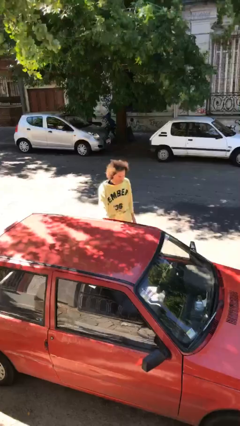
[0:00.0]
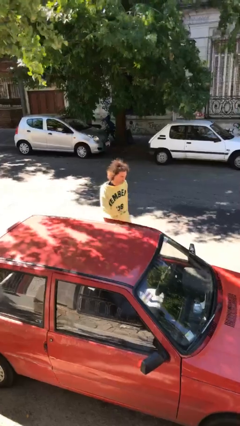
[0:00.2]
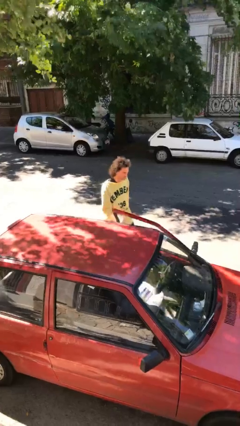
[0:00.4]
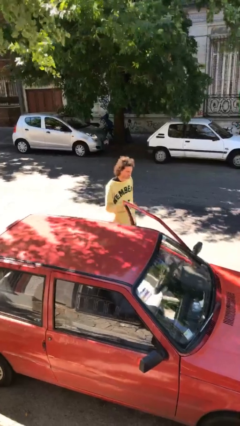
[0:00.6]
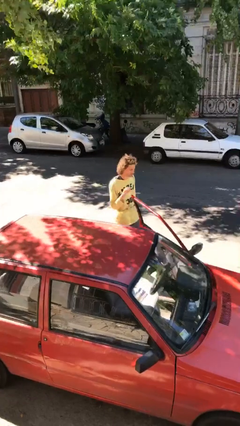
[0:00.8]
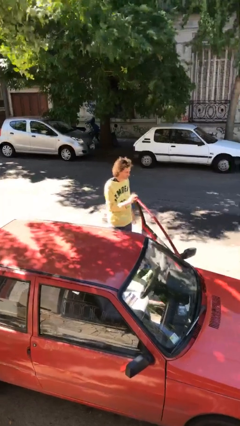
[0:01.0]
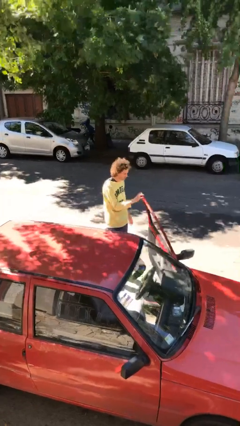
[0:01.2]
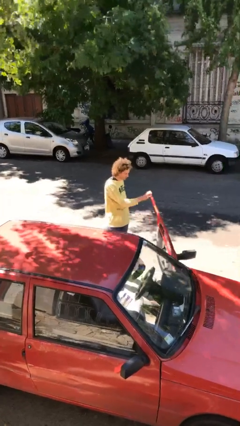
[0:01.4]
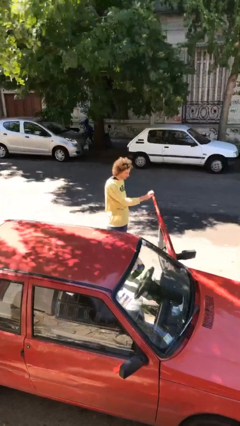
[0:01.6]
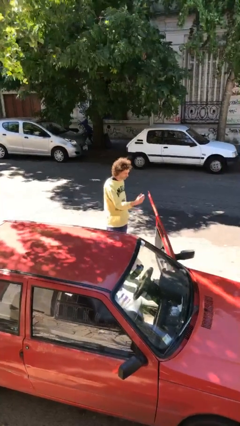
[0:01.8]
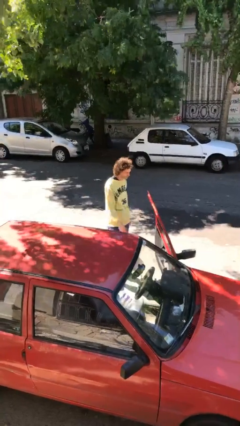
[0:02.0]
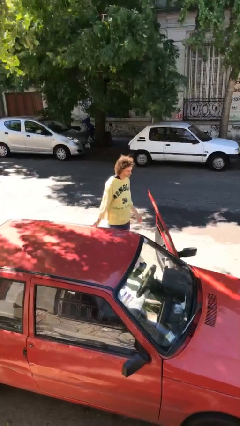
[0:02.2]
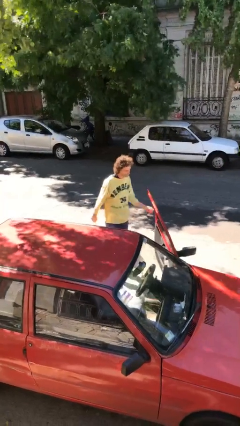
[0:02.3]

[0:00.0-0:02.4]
person opens car door

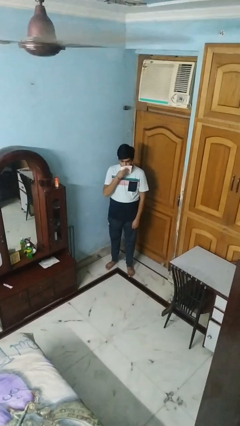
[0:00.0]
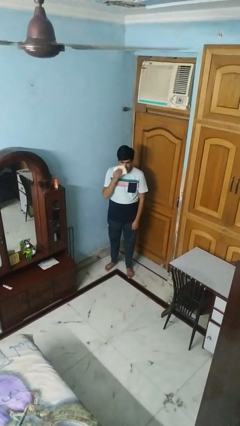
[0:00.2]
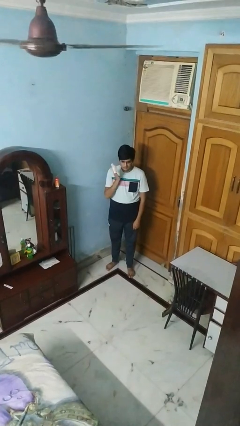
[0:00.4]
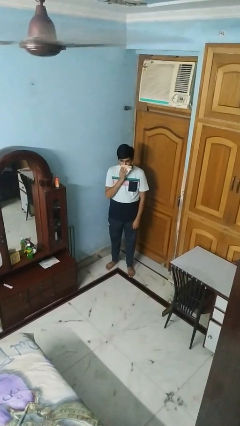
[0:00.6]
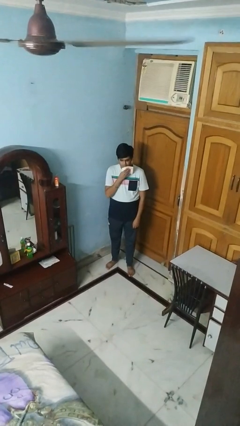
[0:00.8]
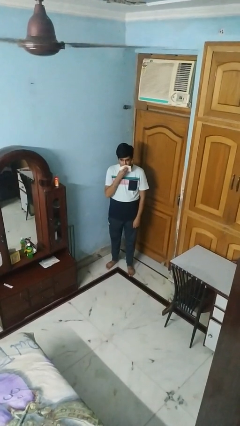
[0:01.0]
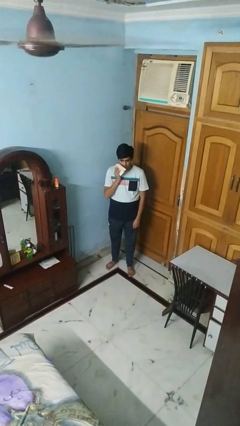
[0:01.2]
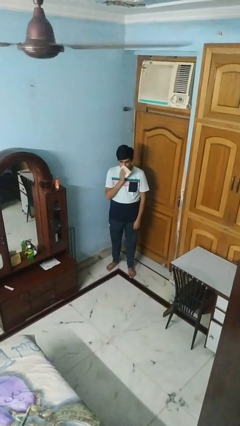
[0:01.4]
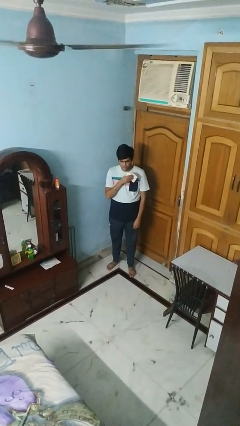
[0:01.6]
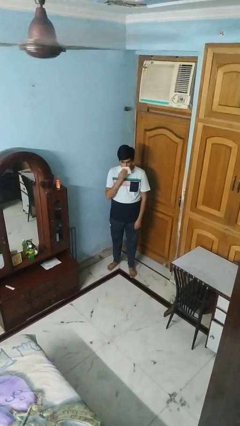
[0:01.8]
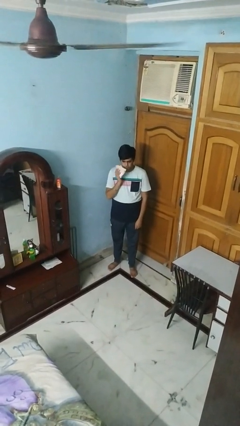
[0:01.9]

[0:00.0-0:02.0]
person wipes mouth with napkin

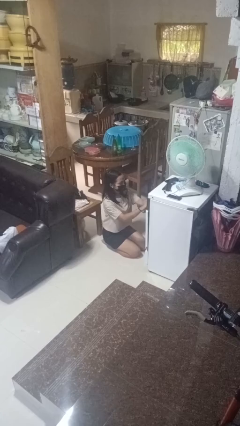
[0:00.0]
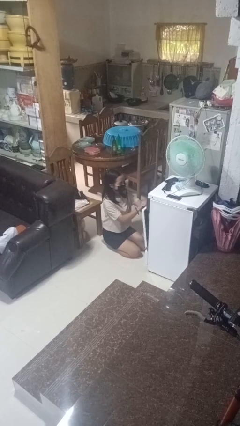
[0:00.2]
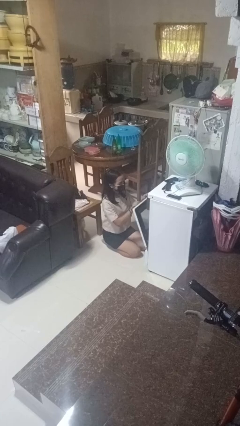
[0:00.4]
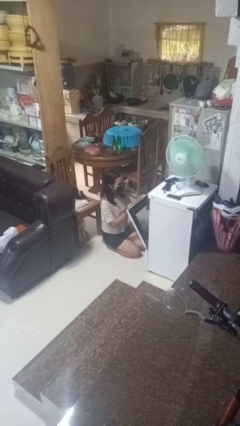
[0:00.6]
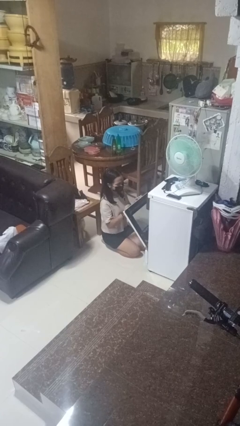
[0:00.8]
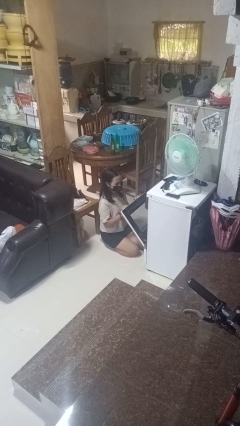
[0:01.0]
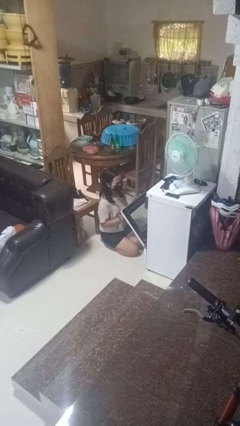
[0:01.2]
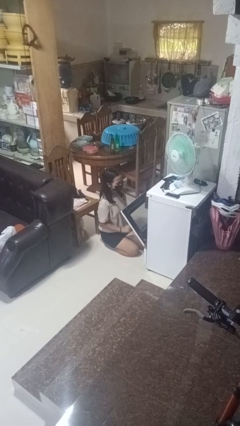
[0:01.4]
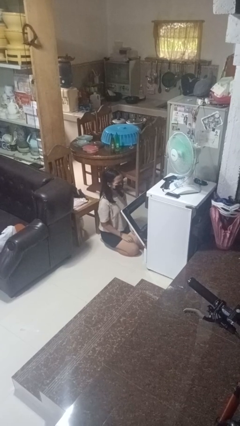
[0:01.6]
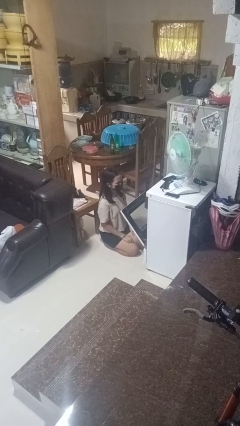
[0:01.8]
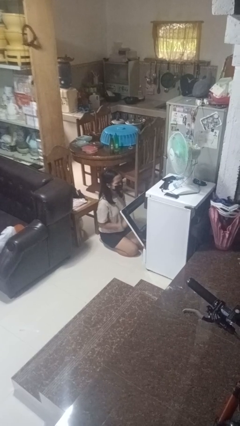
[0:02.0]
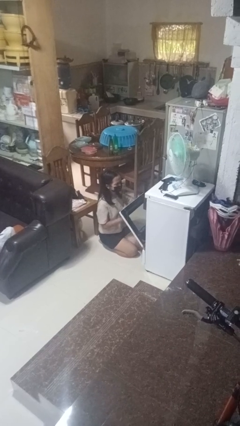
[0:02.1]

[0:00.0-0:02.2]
person opens oven door

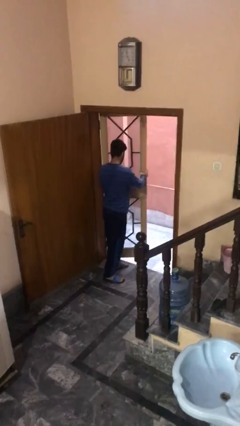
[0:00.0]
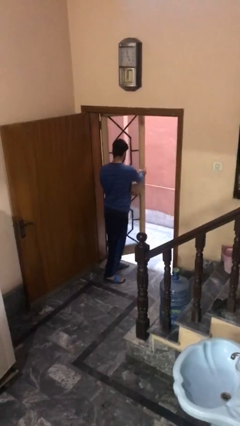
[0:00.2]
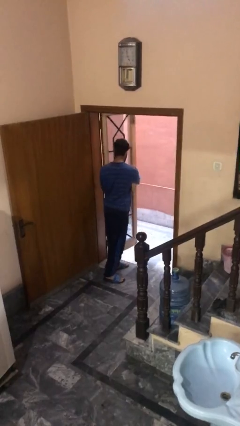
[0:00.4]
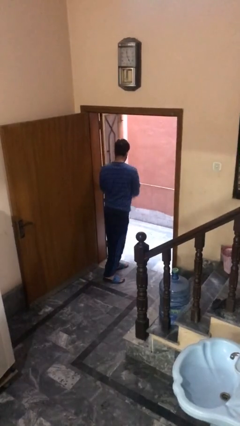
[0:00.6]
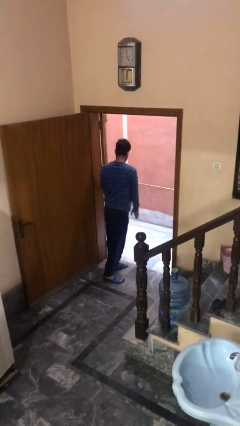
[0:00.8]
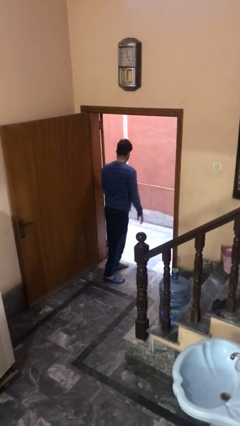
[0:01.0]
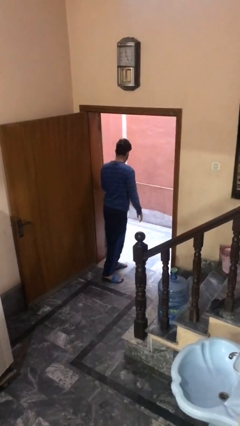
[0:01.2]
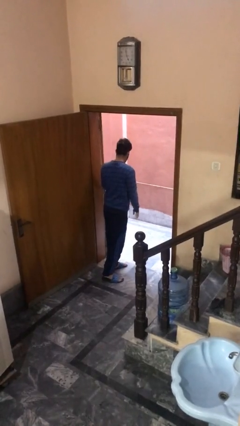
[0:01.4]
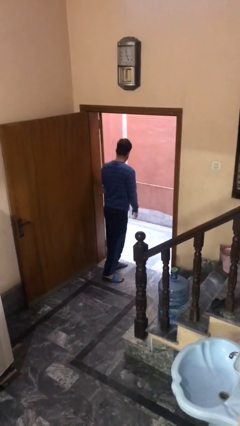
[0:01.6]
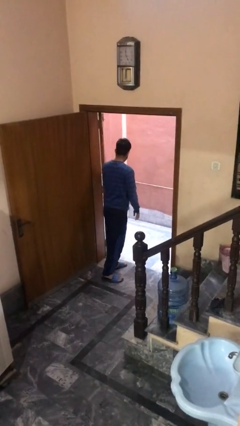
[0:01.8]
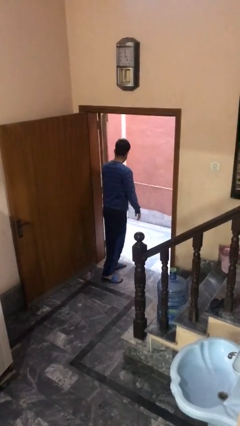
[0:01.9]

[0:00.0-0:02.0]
person opens facility door

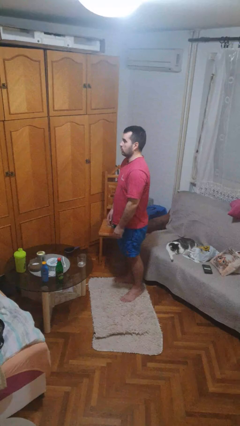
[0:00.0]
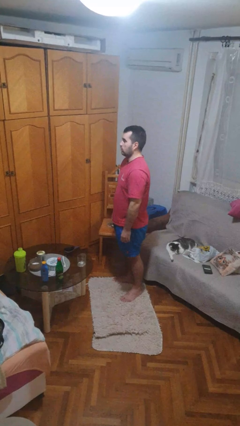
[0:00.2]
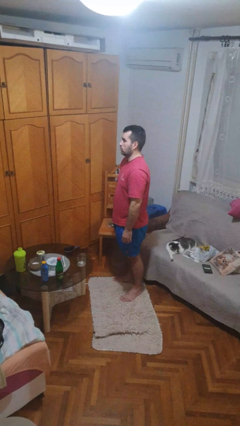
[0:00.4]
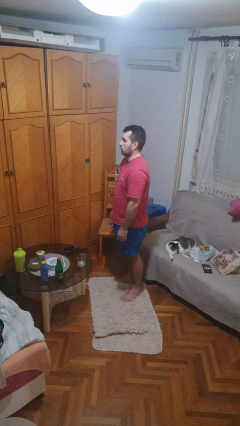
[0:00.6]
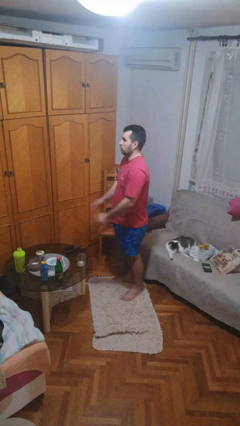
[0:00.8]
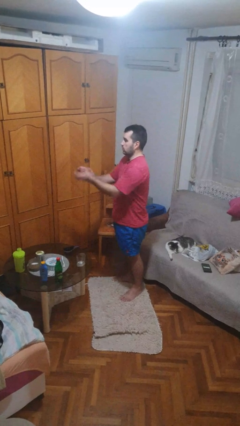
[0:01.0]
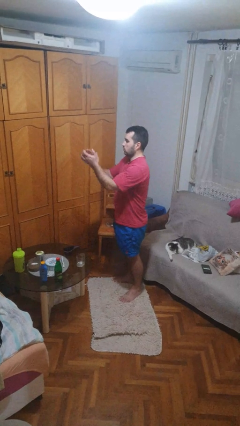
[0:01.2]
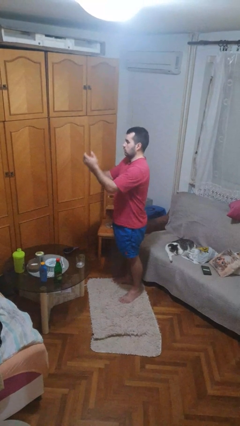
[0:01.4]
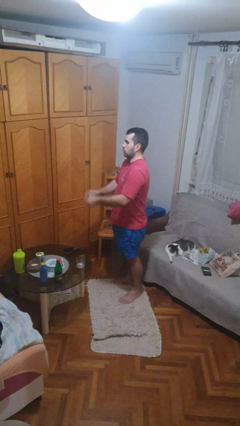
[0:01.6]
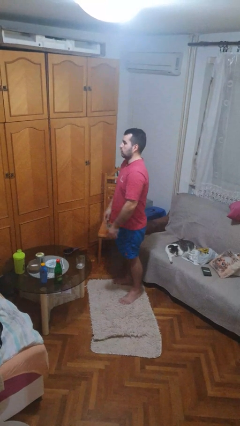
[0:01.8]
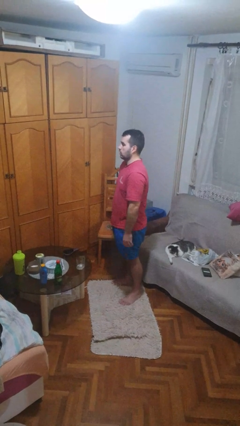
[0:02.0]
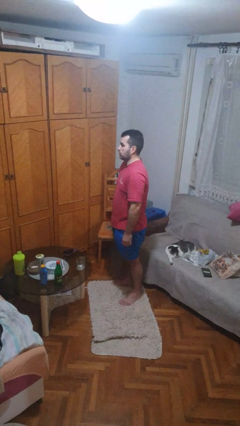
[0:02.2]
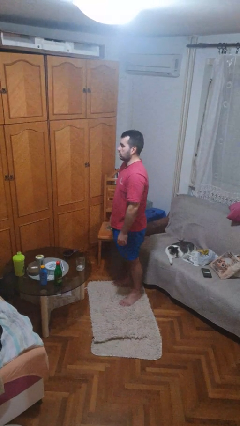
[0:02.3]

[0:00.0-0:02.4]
person claps hands

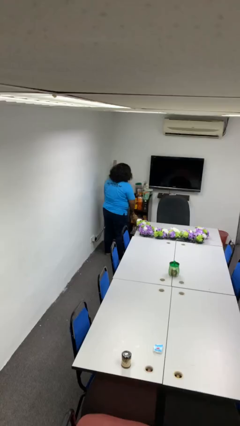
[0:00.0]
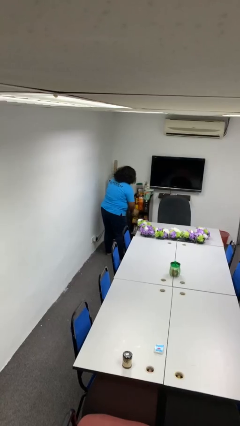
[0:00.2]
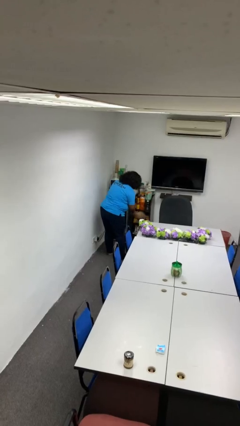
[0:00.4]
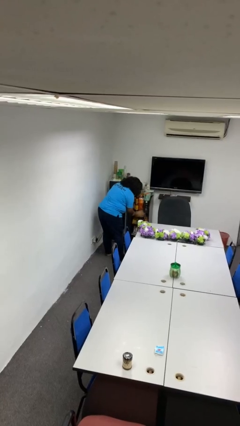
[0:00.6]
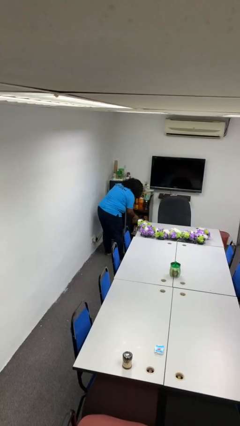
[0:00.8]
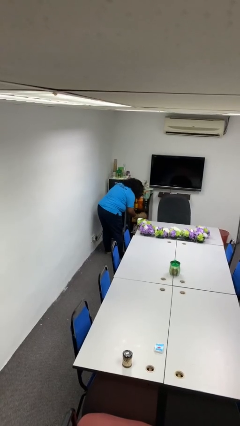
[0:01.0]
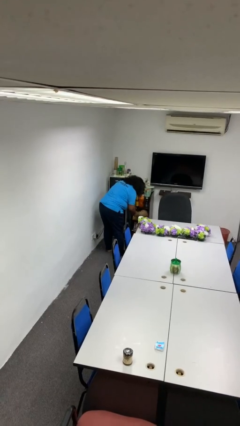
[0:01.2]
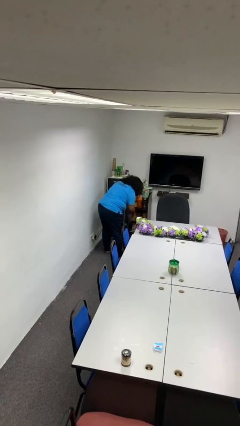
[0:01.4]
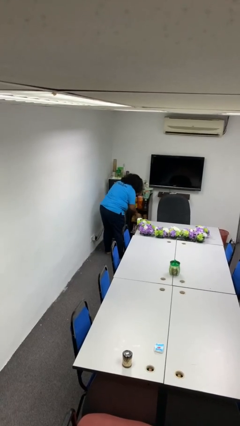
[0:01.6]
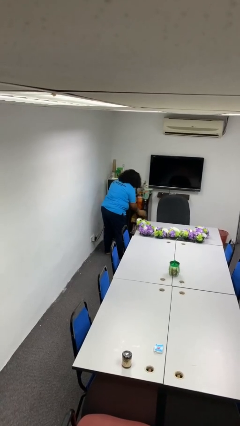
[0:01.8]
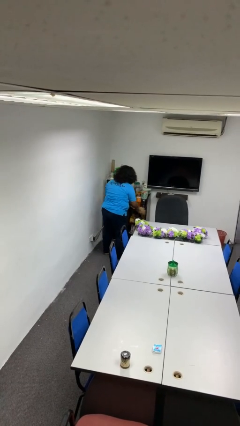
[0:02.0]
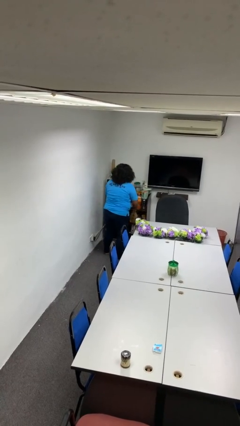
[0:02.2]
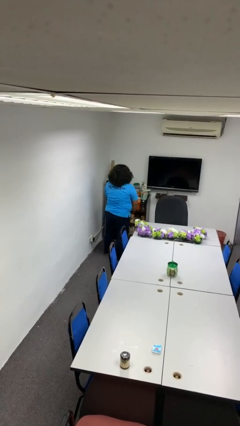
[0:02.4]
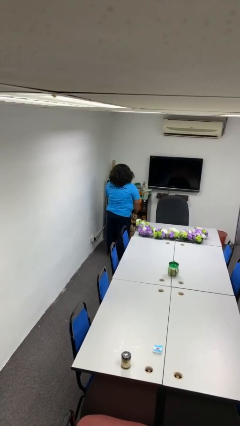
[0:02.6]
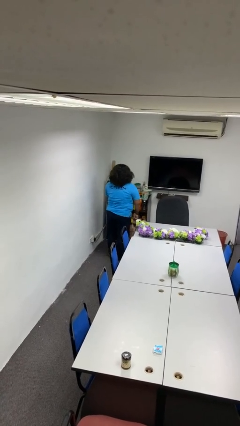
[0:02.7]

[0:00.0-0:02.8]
person dusts furniture

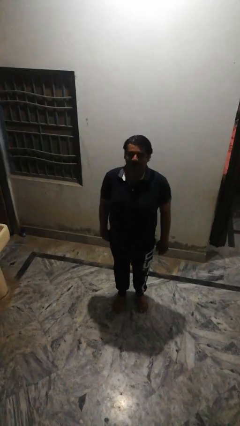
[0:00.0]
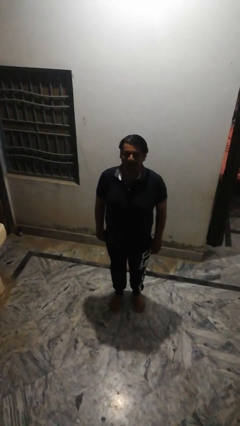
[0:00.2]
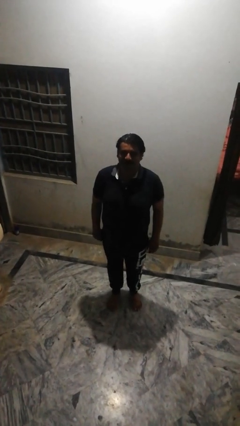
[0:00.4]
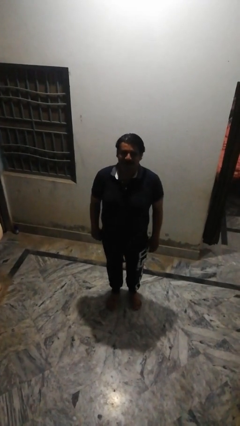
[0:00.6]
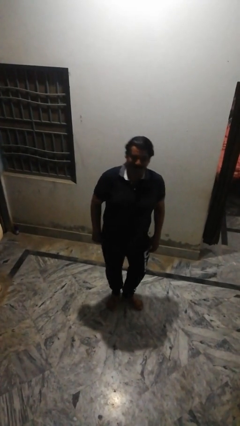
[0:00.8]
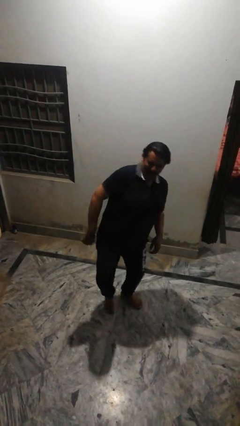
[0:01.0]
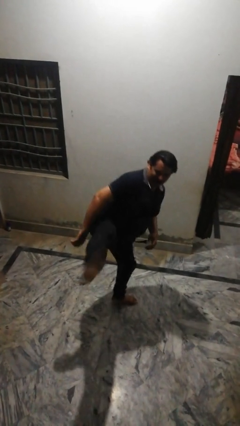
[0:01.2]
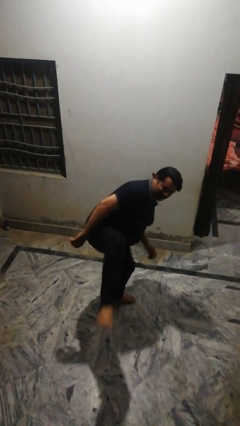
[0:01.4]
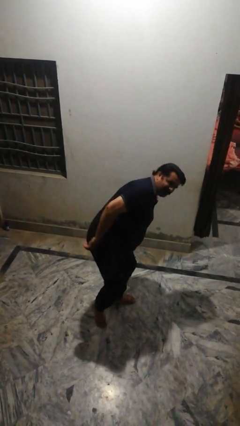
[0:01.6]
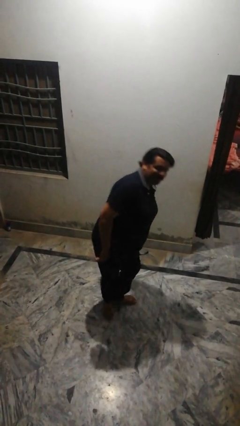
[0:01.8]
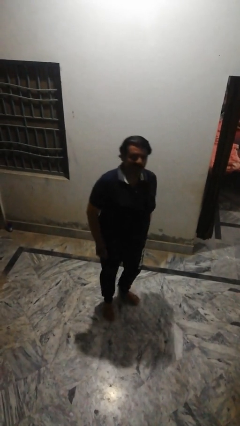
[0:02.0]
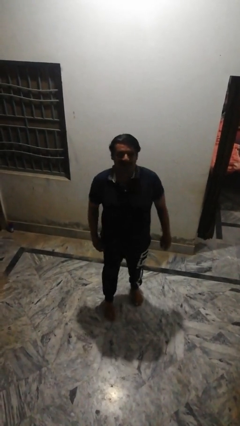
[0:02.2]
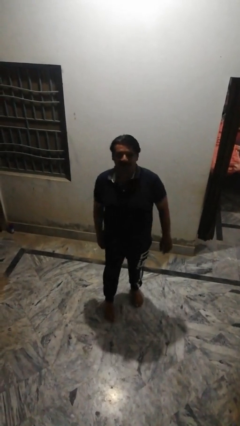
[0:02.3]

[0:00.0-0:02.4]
person karate kicks

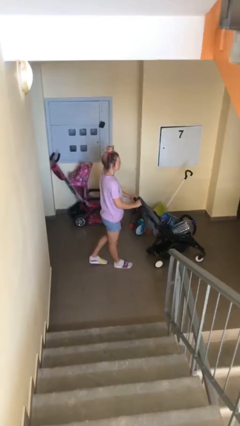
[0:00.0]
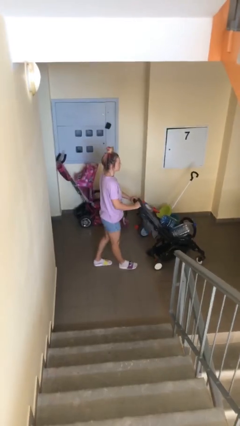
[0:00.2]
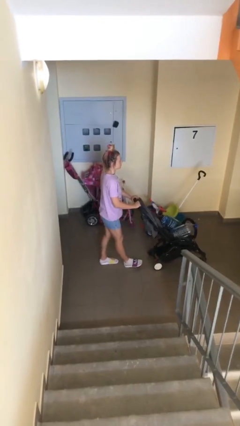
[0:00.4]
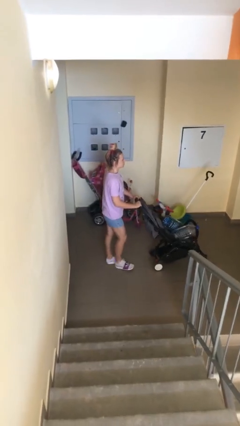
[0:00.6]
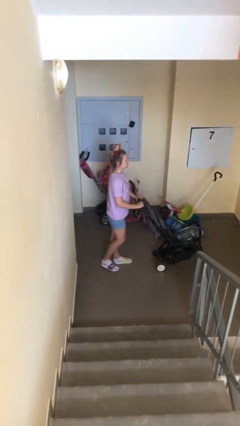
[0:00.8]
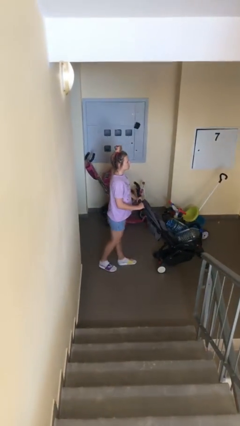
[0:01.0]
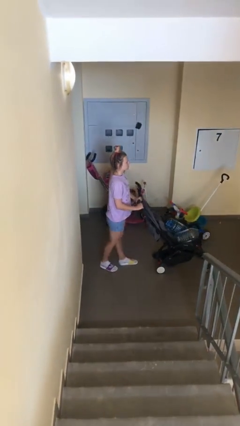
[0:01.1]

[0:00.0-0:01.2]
person pulls wheeled cart
